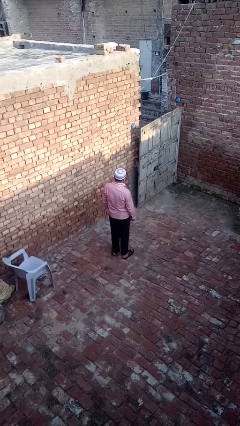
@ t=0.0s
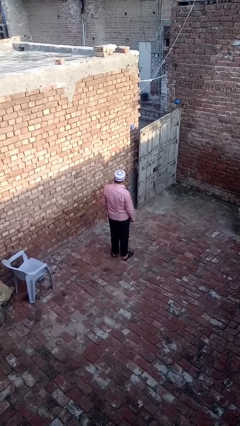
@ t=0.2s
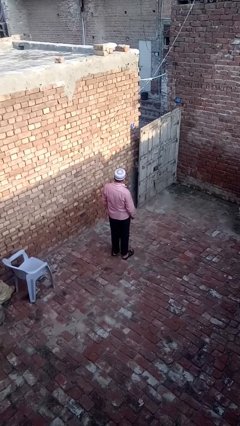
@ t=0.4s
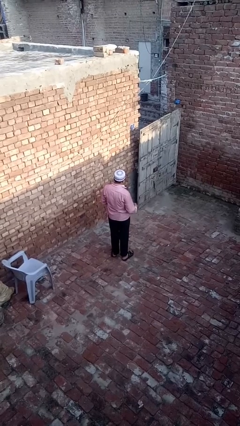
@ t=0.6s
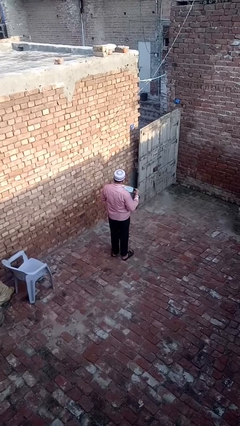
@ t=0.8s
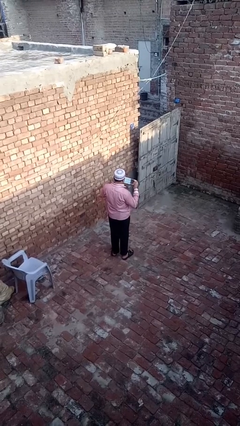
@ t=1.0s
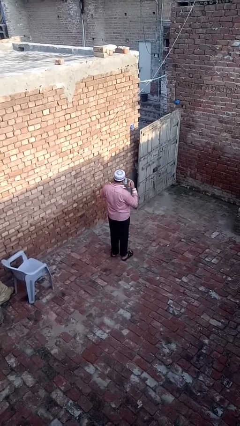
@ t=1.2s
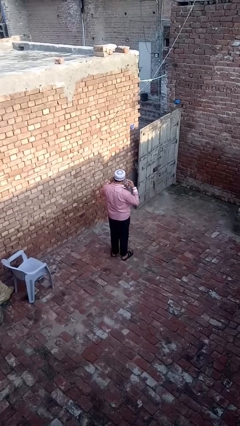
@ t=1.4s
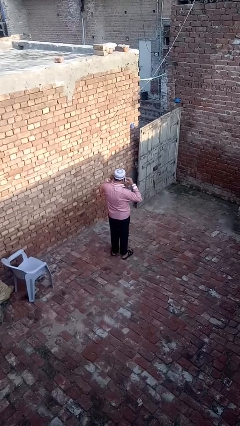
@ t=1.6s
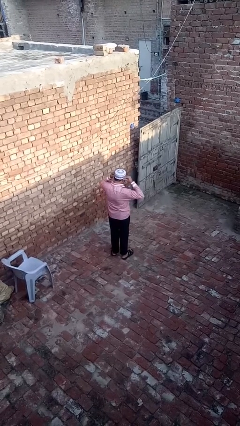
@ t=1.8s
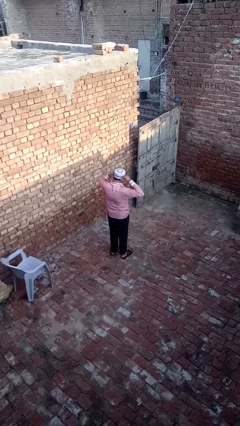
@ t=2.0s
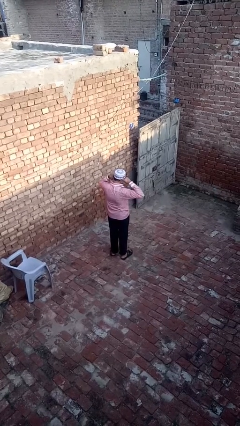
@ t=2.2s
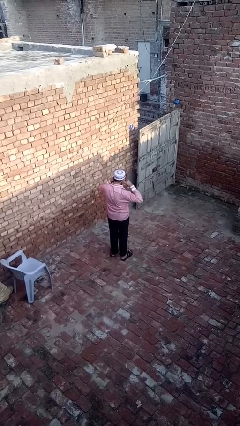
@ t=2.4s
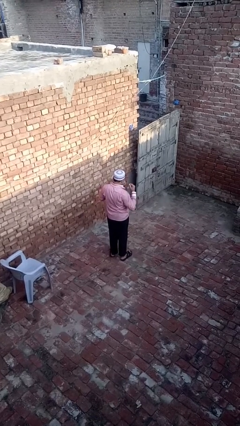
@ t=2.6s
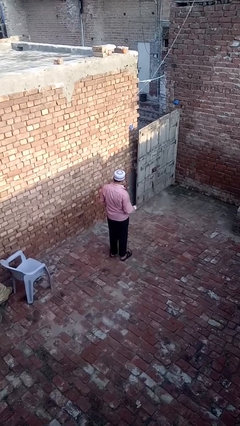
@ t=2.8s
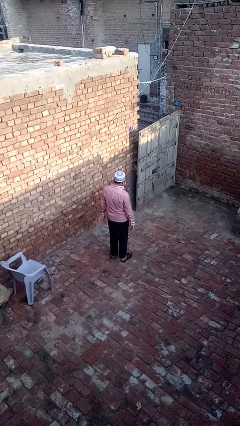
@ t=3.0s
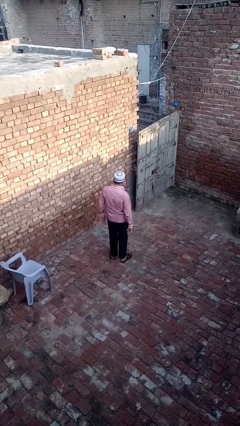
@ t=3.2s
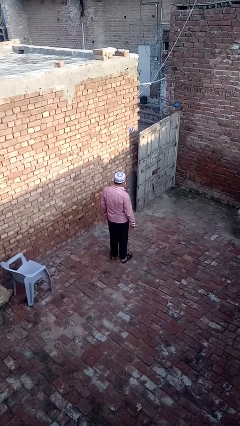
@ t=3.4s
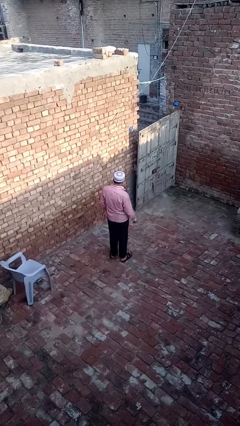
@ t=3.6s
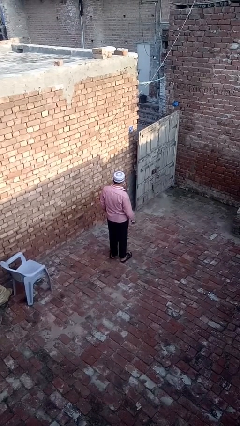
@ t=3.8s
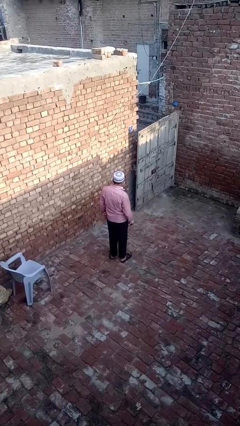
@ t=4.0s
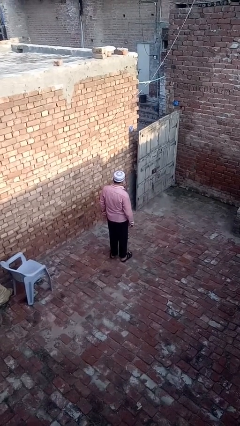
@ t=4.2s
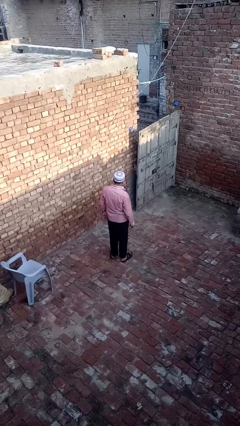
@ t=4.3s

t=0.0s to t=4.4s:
person puts on facemask

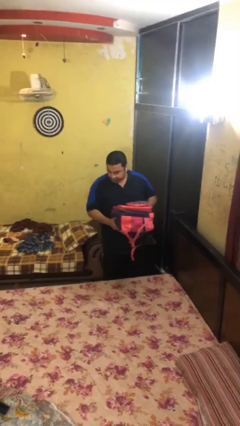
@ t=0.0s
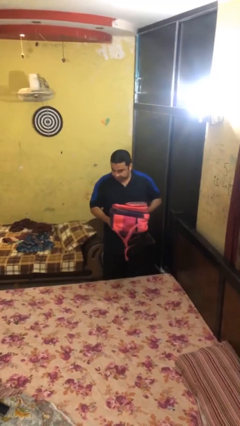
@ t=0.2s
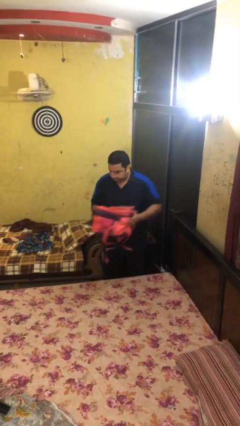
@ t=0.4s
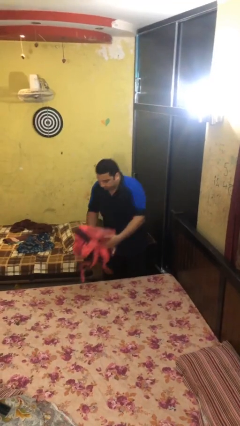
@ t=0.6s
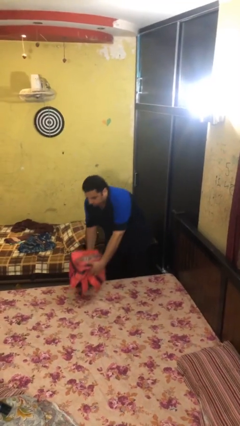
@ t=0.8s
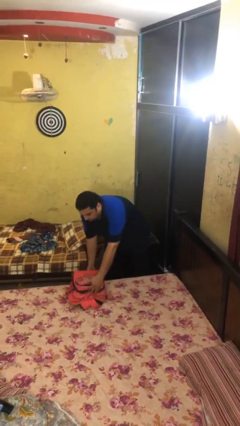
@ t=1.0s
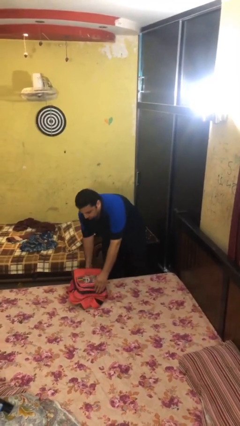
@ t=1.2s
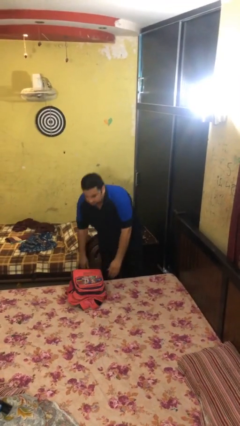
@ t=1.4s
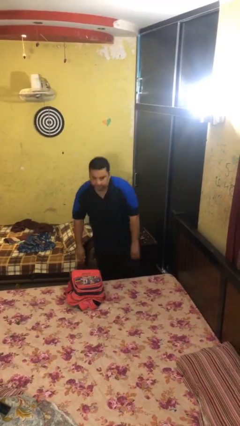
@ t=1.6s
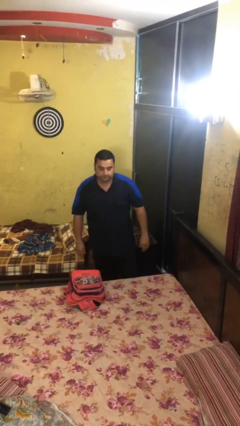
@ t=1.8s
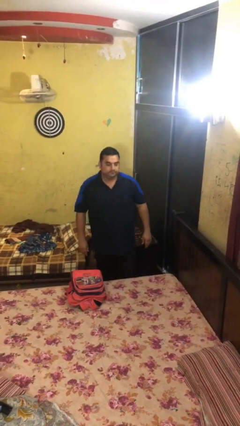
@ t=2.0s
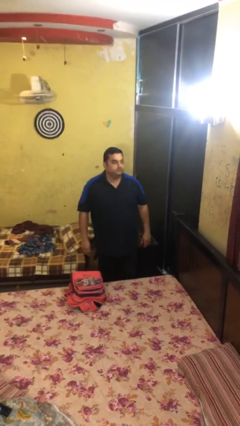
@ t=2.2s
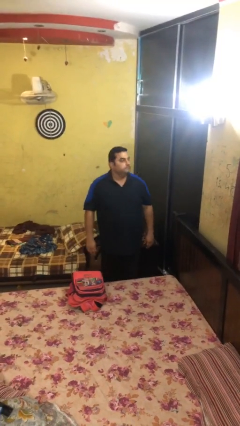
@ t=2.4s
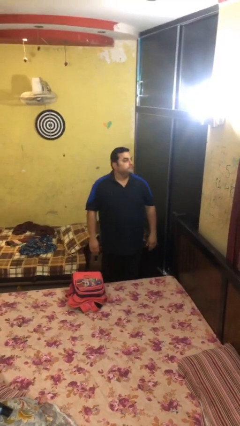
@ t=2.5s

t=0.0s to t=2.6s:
person puts down object on bed

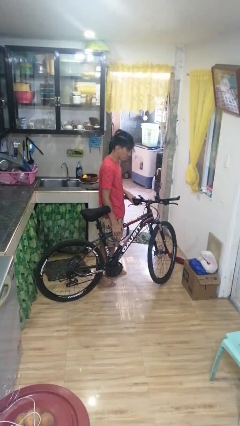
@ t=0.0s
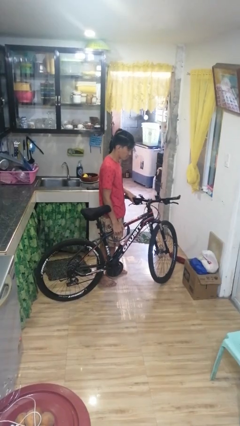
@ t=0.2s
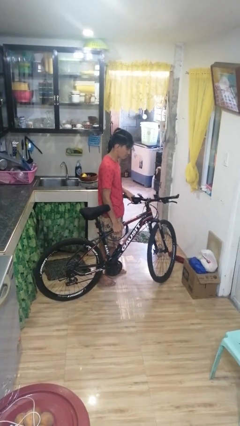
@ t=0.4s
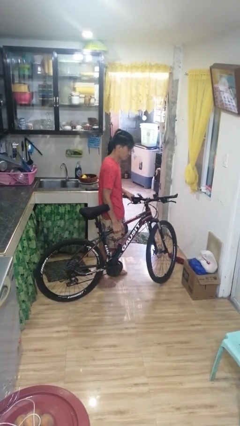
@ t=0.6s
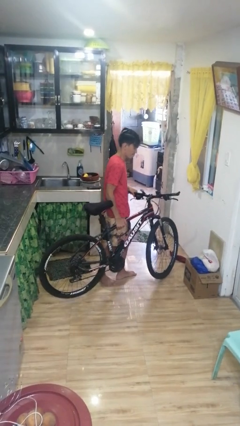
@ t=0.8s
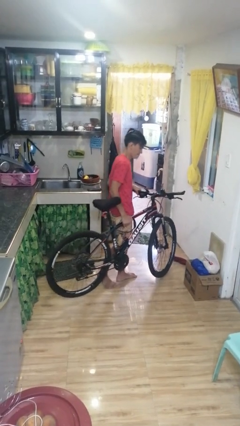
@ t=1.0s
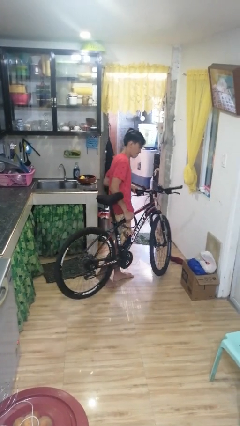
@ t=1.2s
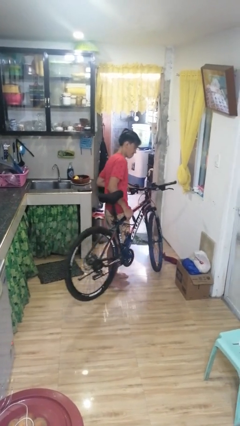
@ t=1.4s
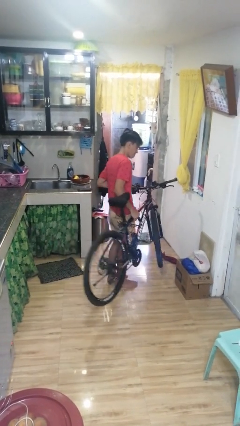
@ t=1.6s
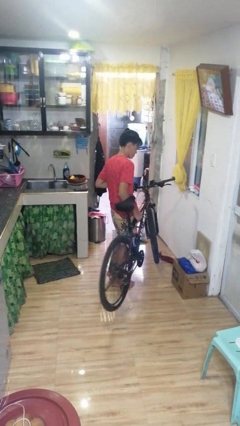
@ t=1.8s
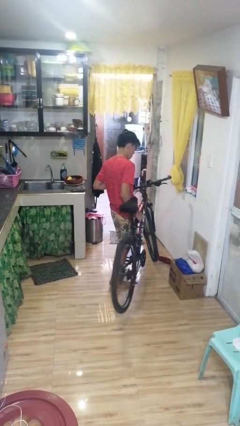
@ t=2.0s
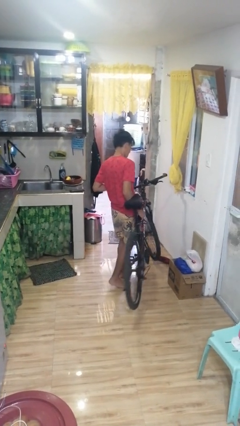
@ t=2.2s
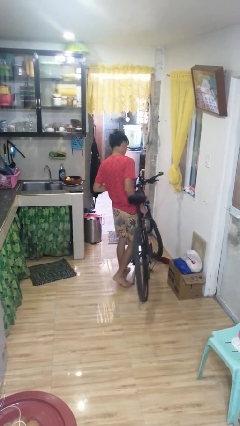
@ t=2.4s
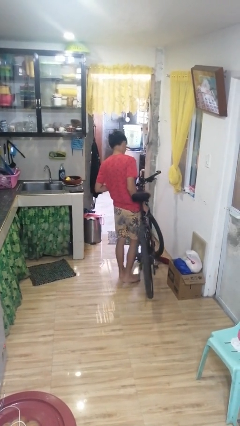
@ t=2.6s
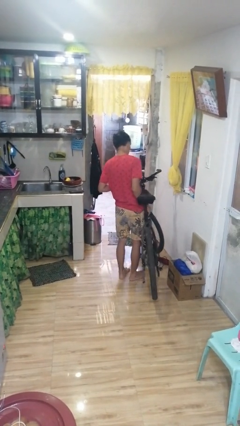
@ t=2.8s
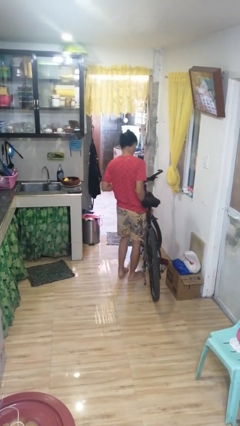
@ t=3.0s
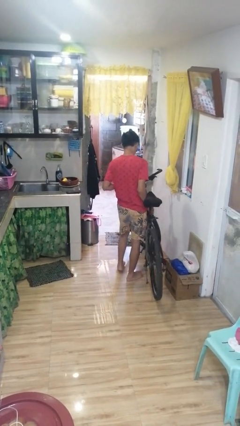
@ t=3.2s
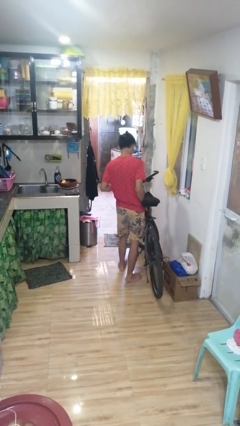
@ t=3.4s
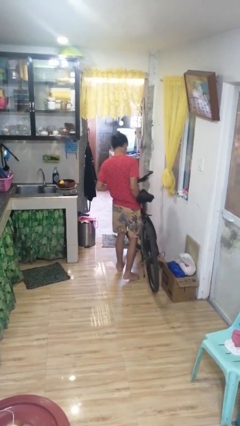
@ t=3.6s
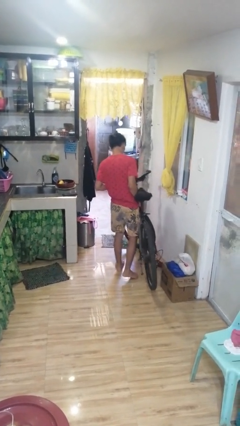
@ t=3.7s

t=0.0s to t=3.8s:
person carries bicycle

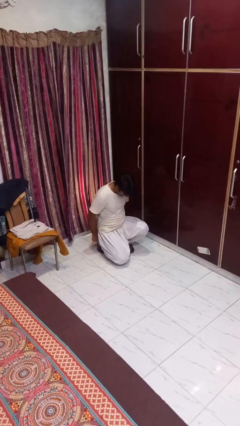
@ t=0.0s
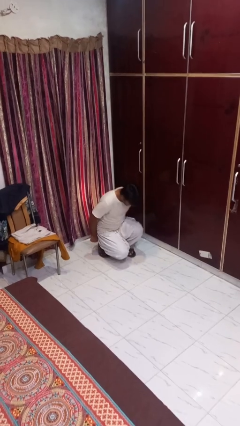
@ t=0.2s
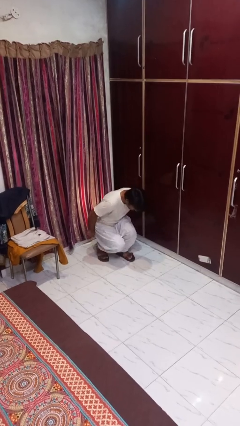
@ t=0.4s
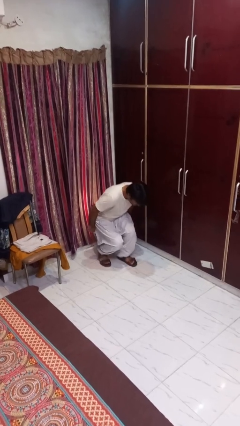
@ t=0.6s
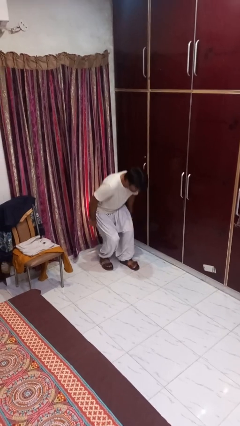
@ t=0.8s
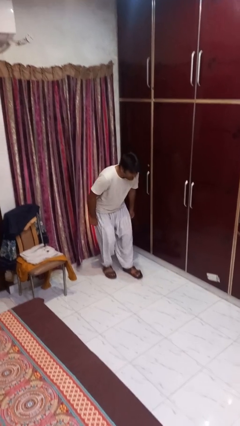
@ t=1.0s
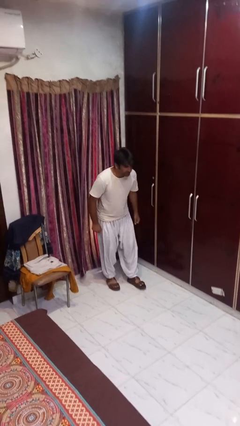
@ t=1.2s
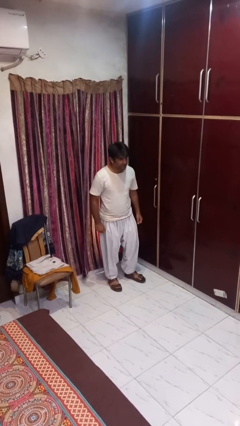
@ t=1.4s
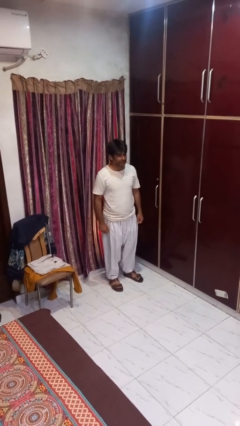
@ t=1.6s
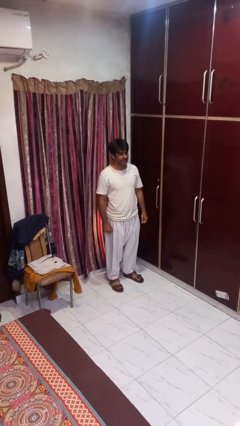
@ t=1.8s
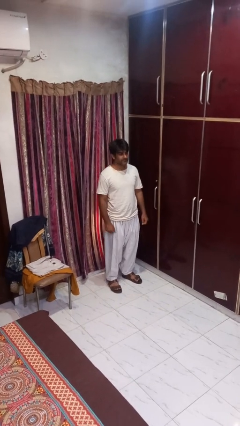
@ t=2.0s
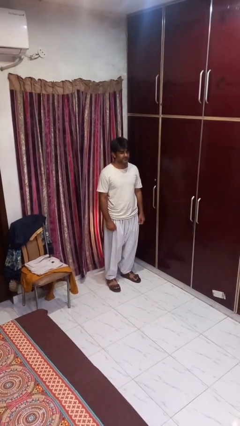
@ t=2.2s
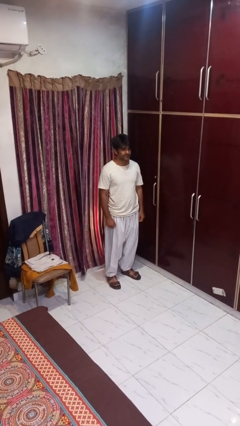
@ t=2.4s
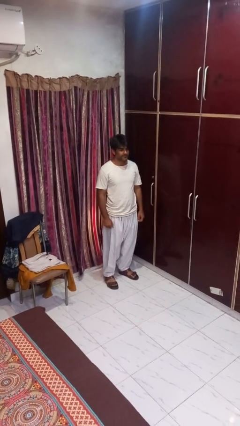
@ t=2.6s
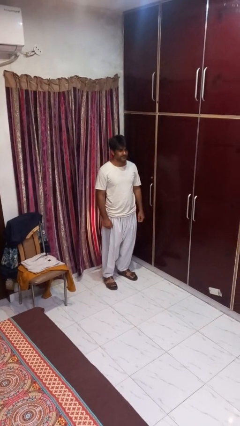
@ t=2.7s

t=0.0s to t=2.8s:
person stands up from floor

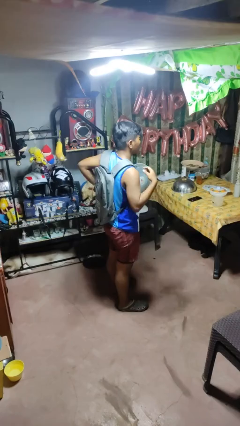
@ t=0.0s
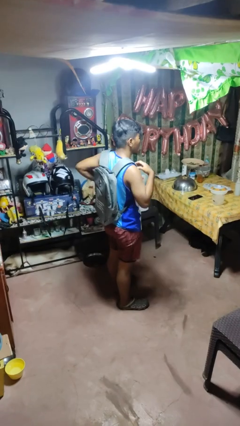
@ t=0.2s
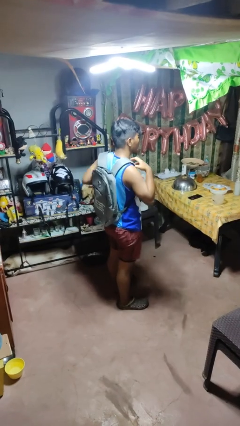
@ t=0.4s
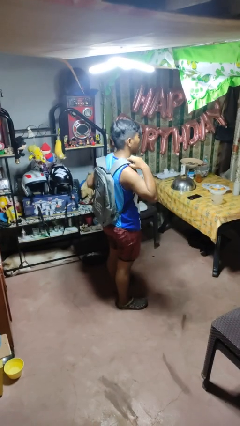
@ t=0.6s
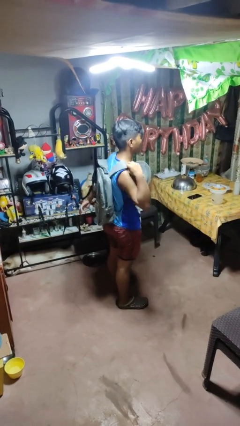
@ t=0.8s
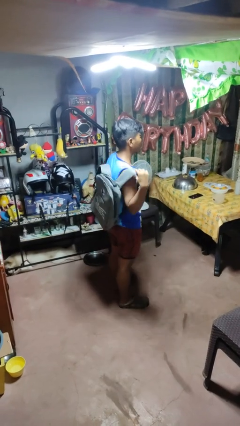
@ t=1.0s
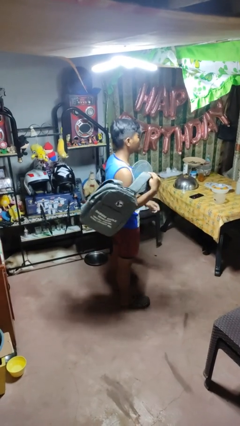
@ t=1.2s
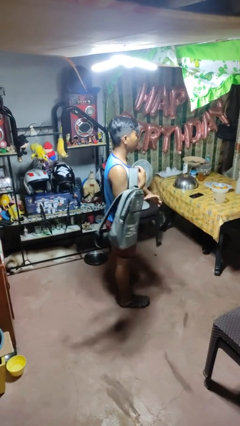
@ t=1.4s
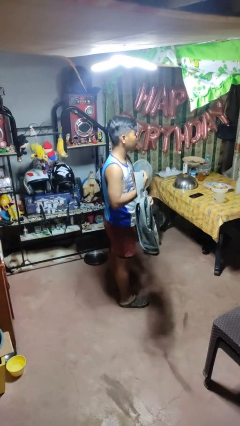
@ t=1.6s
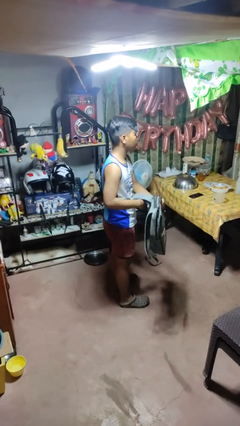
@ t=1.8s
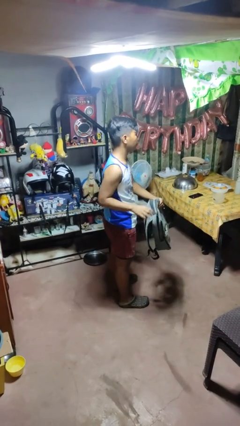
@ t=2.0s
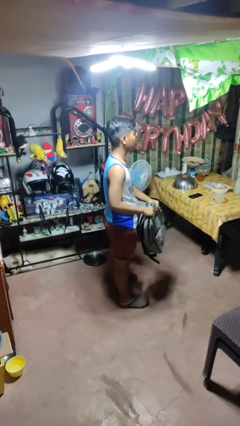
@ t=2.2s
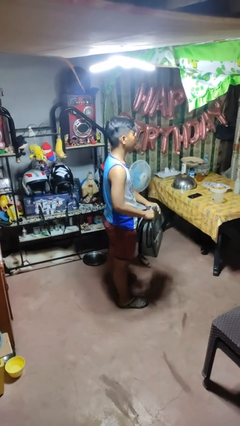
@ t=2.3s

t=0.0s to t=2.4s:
person takes off backpack

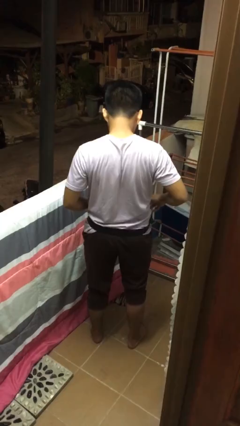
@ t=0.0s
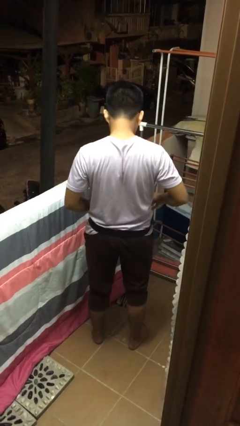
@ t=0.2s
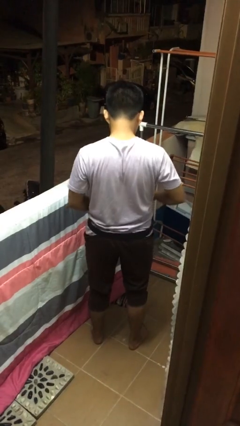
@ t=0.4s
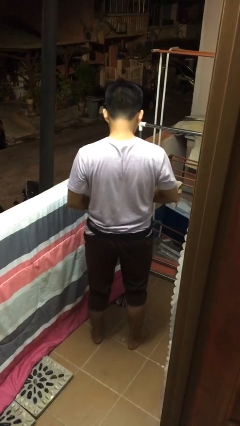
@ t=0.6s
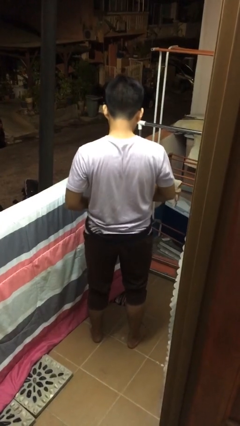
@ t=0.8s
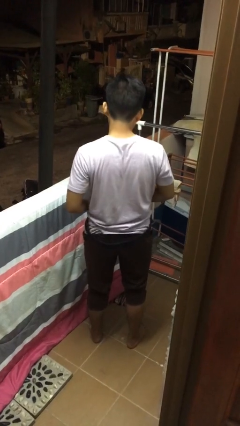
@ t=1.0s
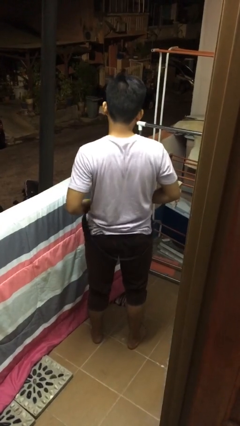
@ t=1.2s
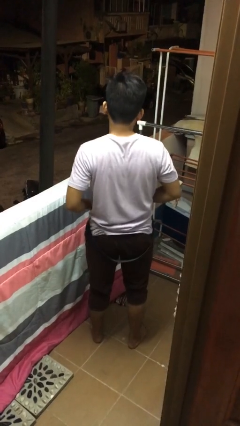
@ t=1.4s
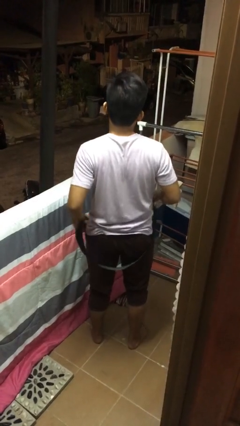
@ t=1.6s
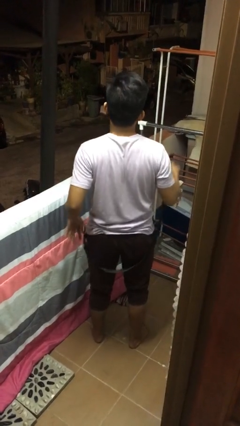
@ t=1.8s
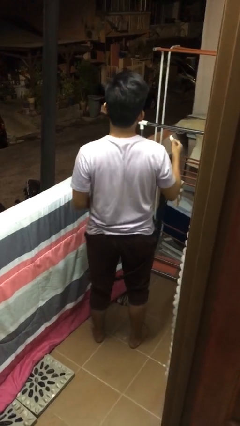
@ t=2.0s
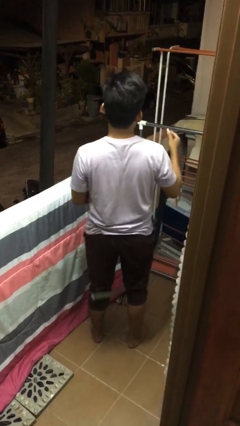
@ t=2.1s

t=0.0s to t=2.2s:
person takes off belt
